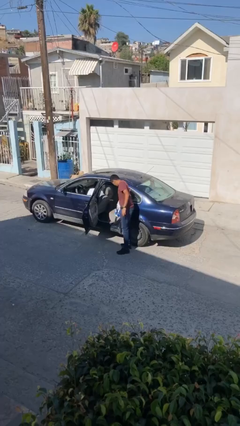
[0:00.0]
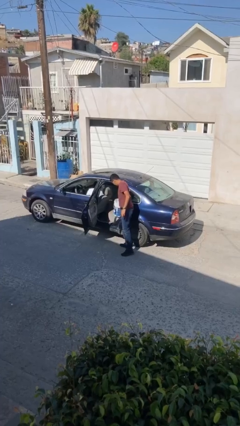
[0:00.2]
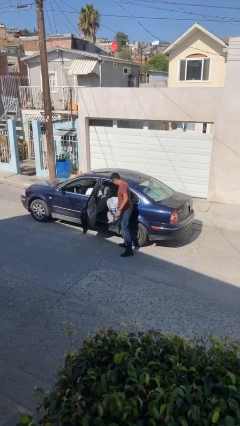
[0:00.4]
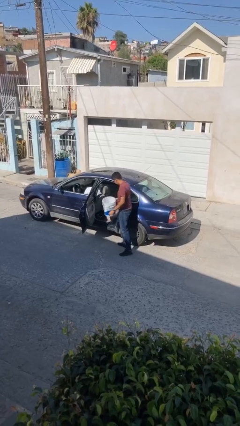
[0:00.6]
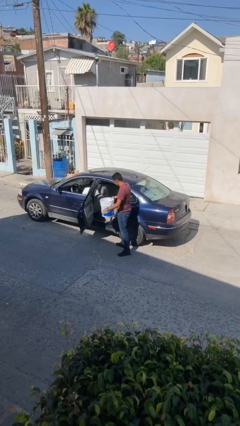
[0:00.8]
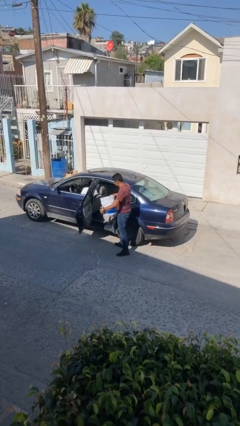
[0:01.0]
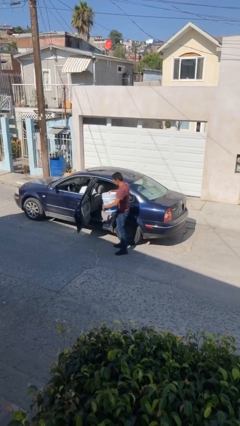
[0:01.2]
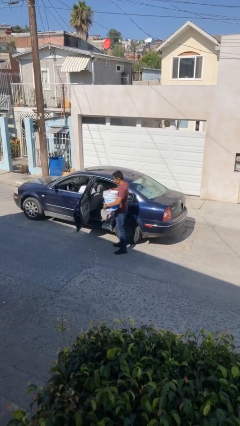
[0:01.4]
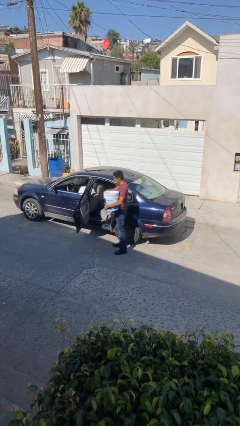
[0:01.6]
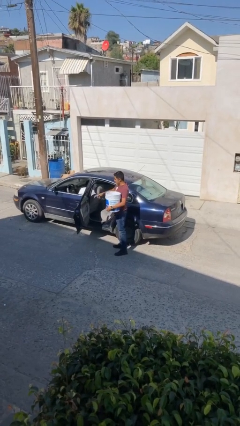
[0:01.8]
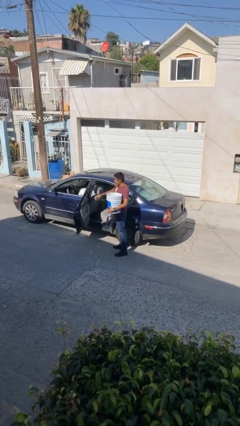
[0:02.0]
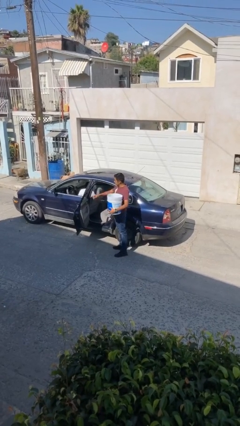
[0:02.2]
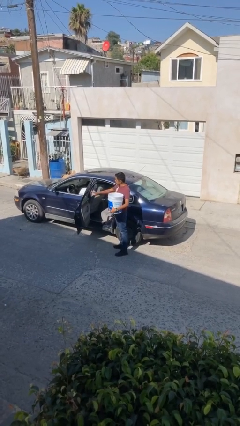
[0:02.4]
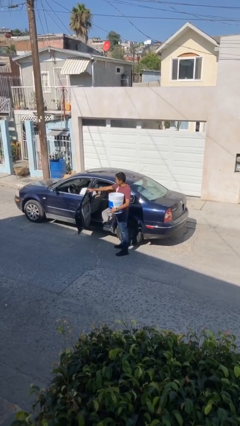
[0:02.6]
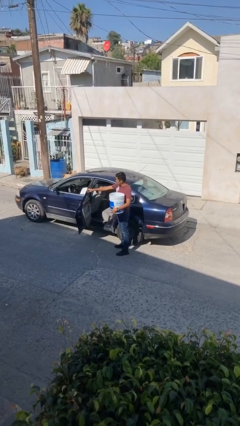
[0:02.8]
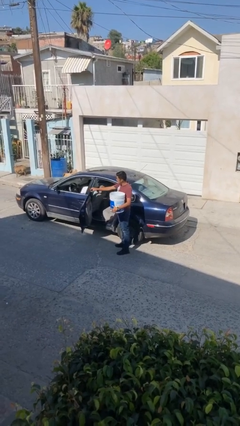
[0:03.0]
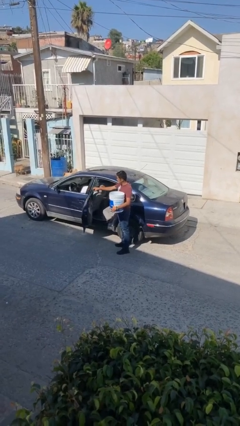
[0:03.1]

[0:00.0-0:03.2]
person unloads car

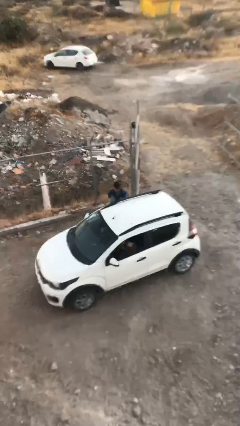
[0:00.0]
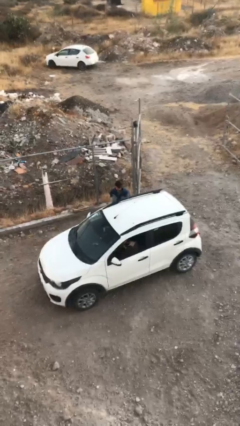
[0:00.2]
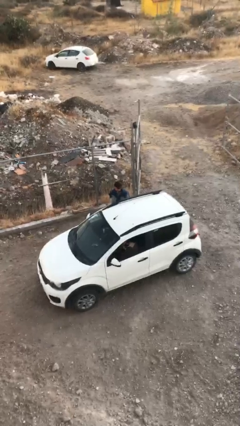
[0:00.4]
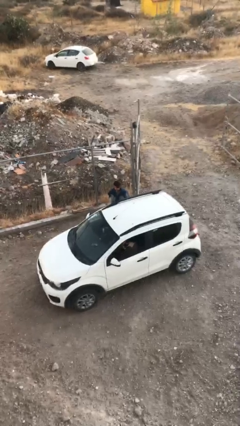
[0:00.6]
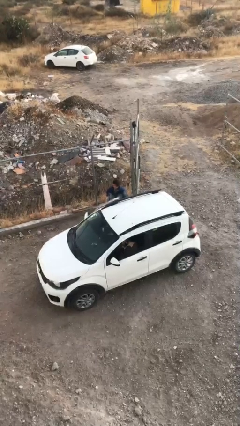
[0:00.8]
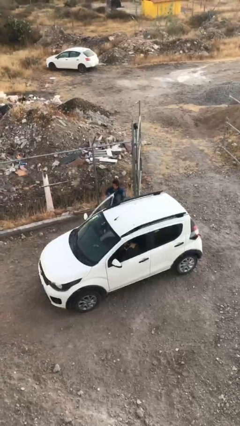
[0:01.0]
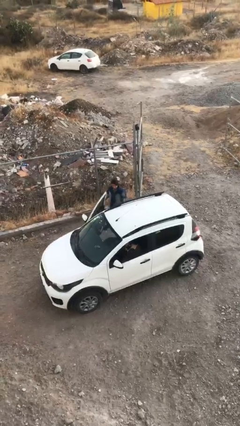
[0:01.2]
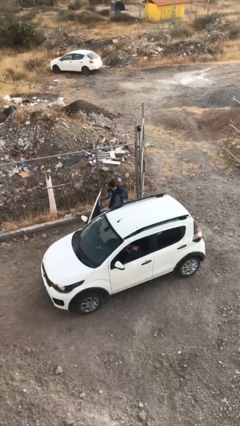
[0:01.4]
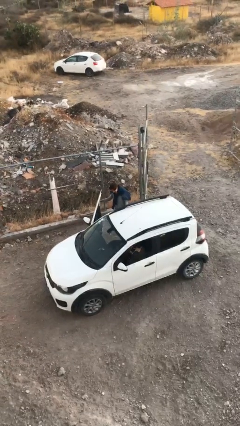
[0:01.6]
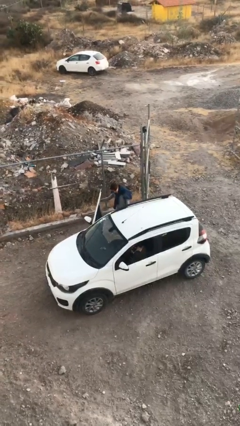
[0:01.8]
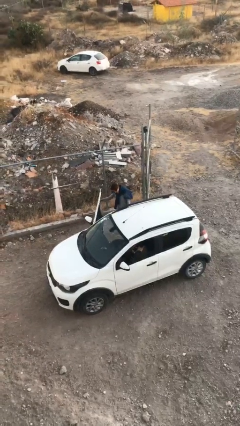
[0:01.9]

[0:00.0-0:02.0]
person opens car door

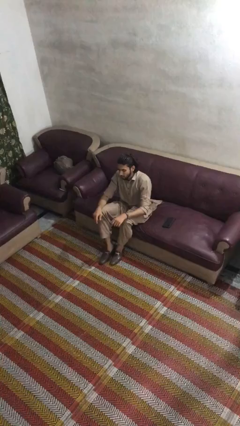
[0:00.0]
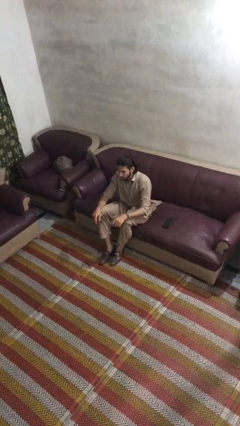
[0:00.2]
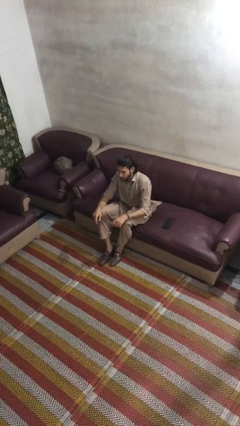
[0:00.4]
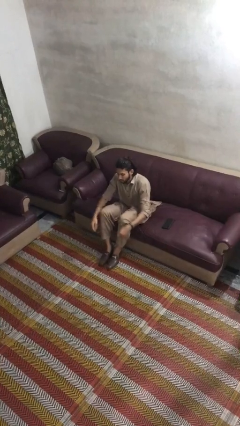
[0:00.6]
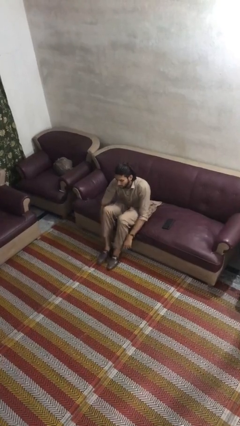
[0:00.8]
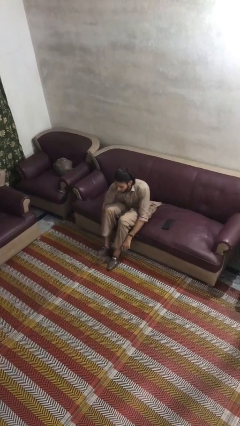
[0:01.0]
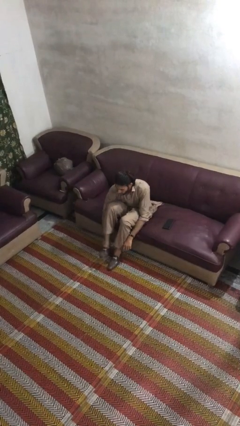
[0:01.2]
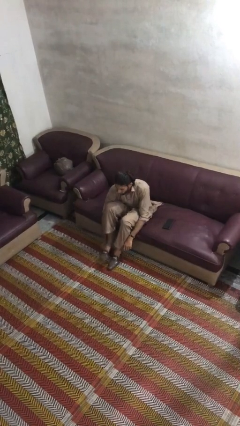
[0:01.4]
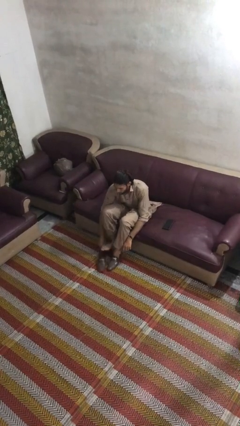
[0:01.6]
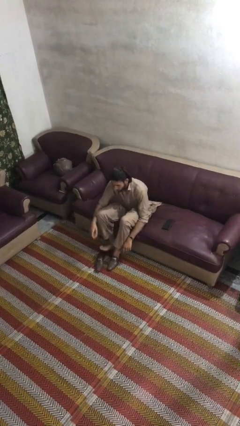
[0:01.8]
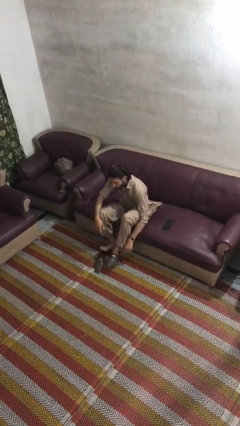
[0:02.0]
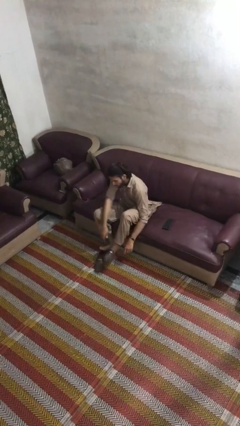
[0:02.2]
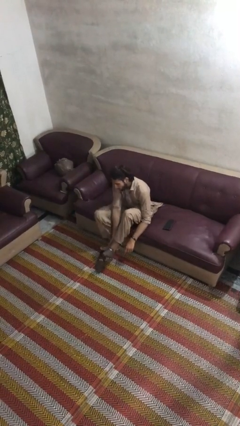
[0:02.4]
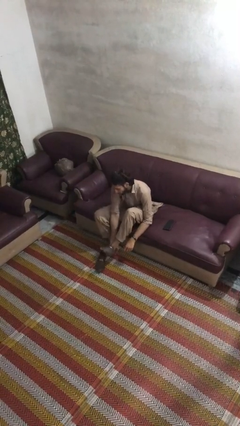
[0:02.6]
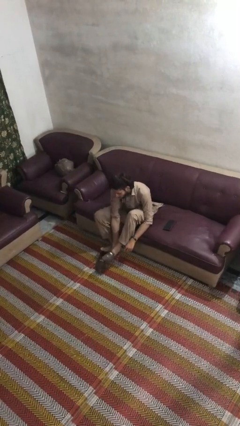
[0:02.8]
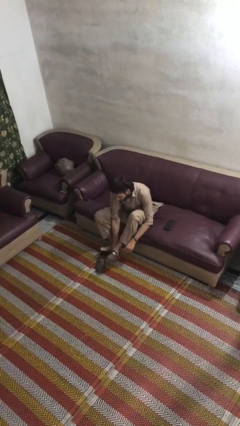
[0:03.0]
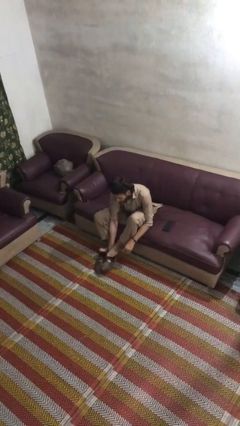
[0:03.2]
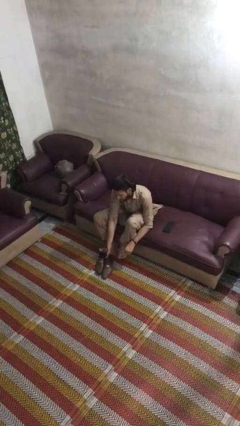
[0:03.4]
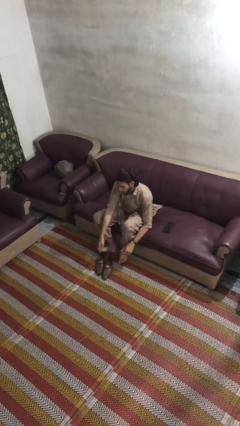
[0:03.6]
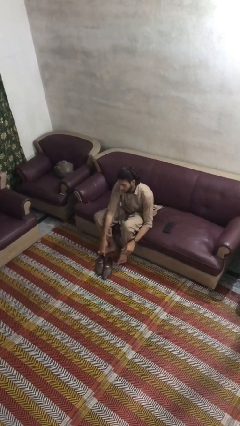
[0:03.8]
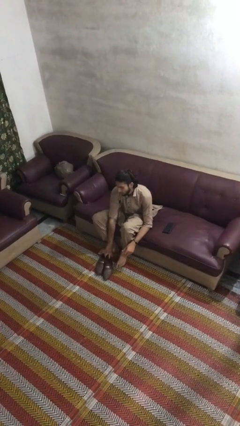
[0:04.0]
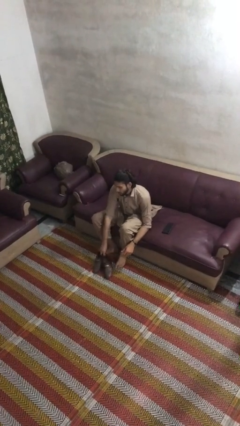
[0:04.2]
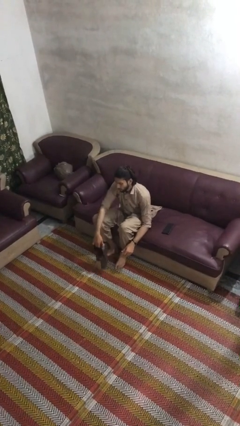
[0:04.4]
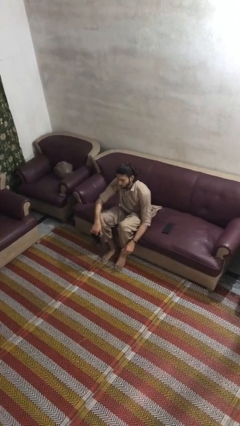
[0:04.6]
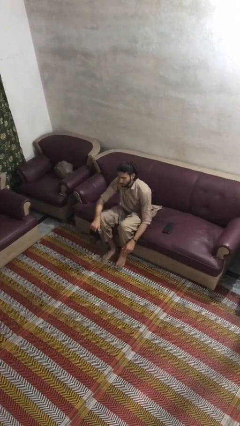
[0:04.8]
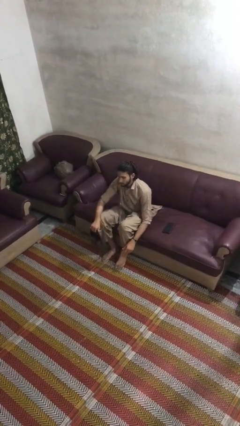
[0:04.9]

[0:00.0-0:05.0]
person takes off shoes

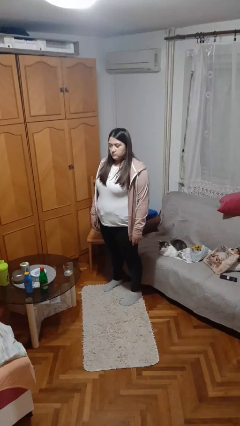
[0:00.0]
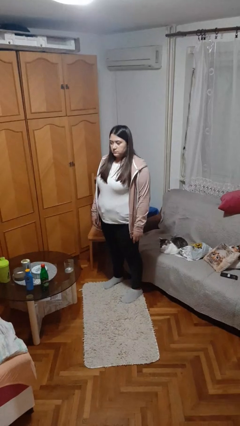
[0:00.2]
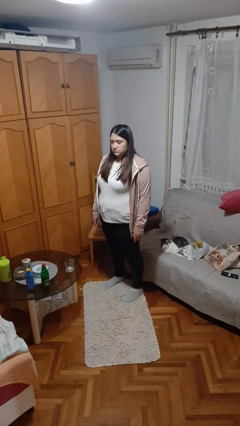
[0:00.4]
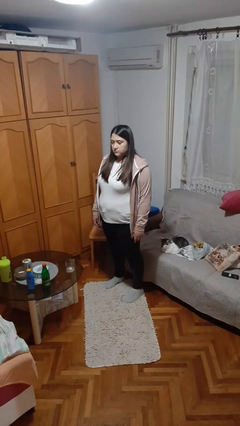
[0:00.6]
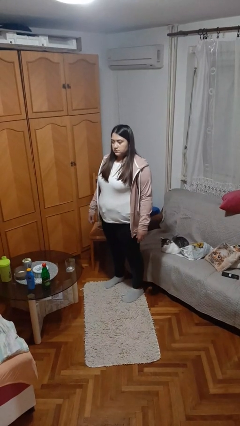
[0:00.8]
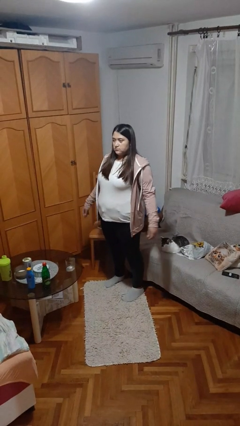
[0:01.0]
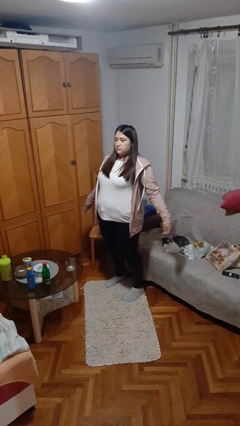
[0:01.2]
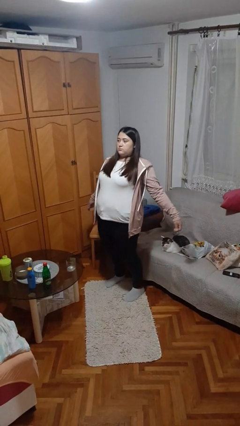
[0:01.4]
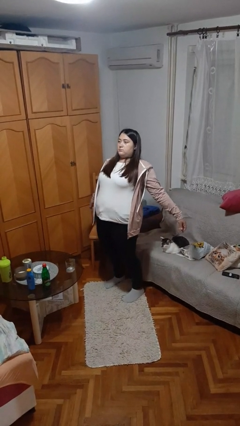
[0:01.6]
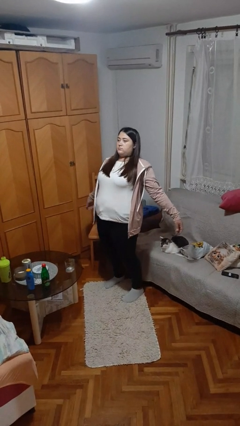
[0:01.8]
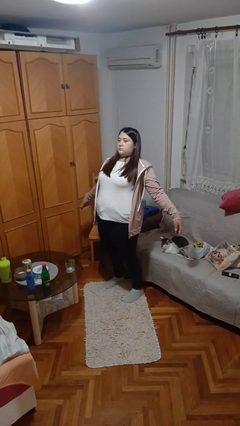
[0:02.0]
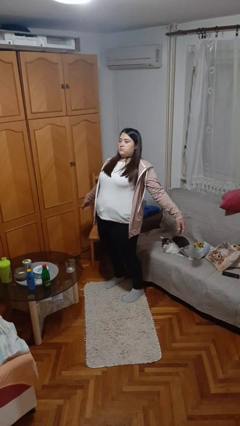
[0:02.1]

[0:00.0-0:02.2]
person stretches back

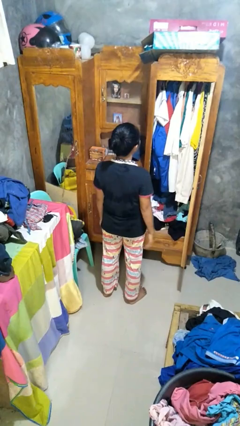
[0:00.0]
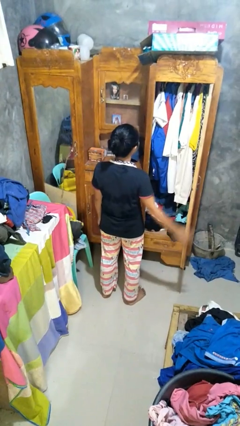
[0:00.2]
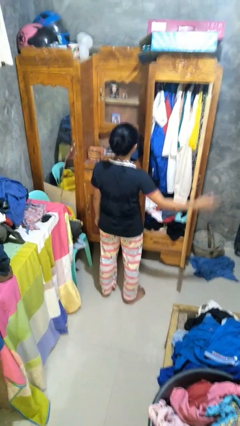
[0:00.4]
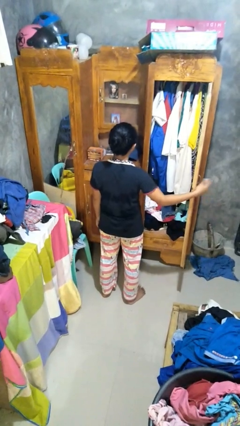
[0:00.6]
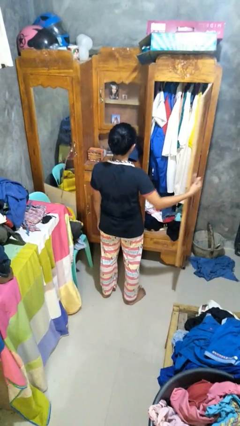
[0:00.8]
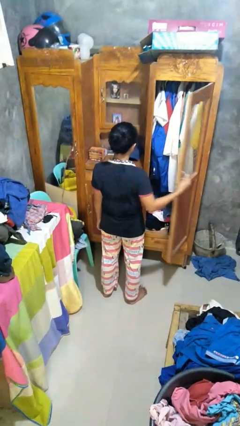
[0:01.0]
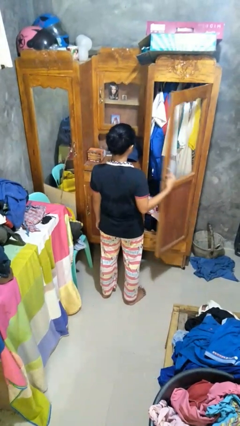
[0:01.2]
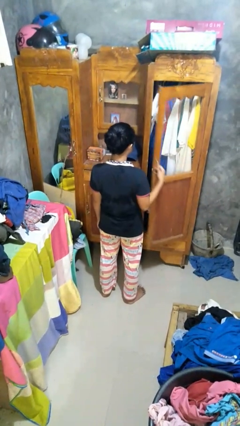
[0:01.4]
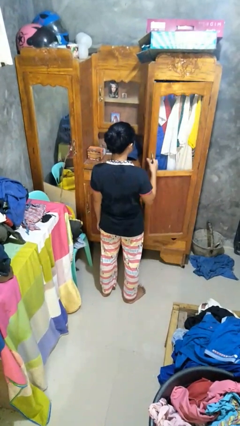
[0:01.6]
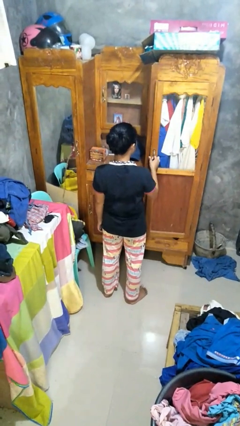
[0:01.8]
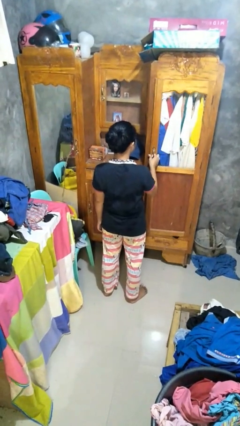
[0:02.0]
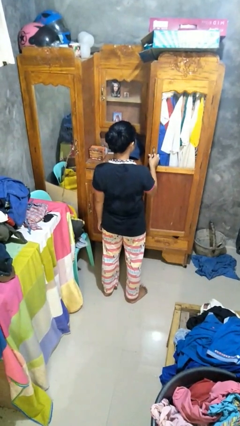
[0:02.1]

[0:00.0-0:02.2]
person closes closet door

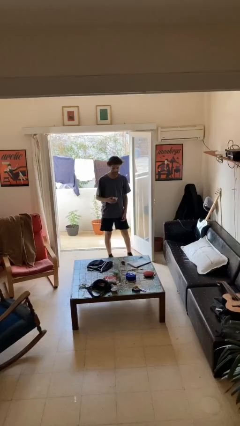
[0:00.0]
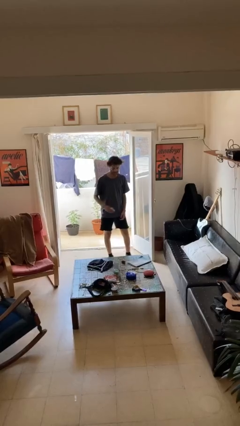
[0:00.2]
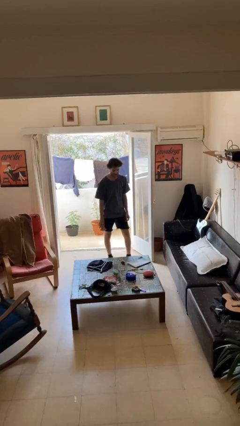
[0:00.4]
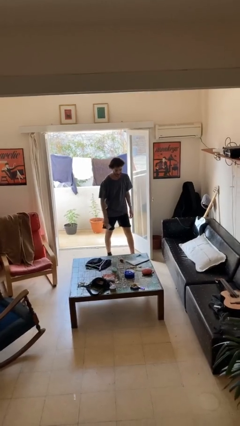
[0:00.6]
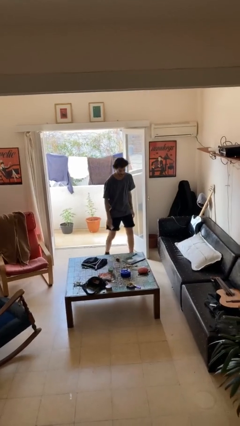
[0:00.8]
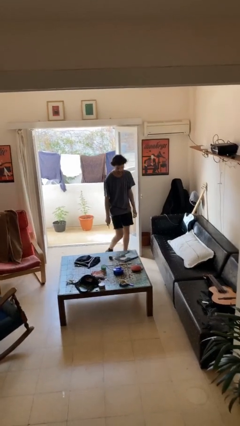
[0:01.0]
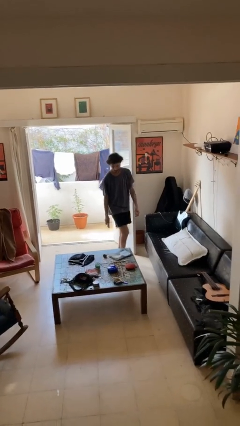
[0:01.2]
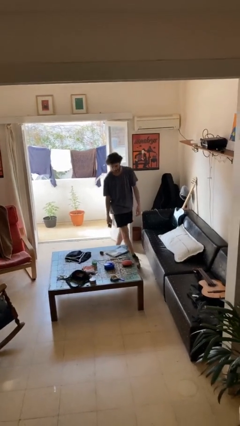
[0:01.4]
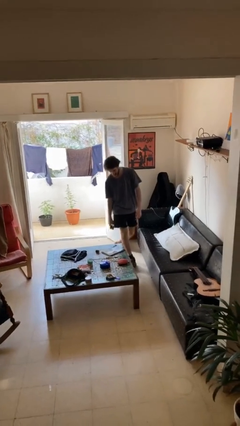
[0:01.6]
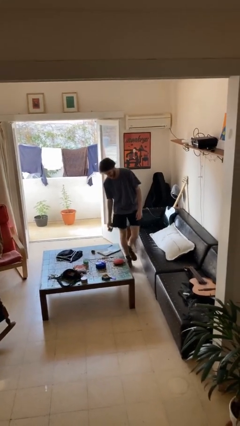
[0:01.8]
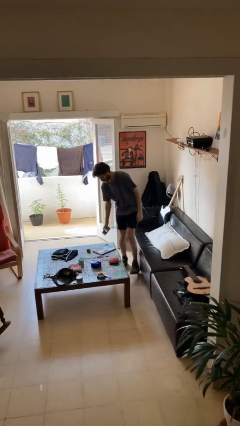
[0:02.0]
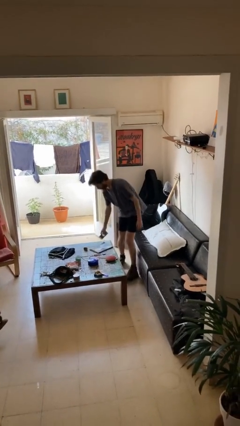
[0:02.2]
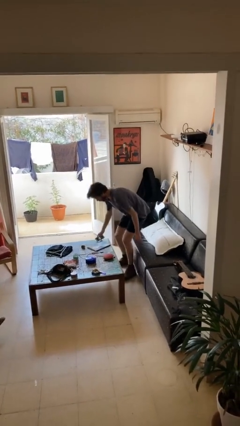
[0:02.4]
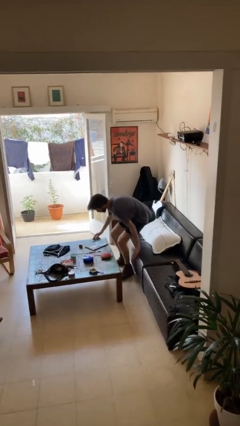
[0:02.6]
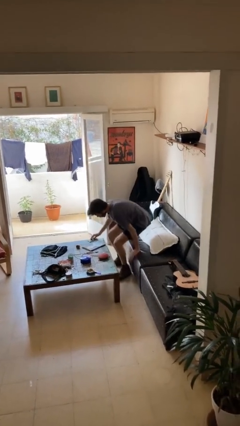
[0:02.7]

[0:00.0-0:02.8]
person sits down
